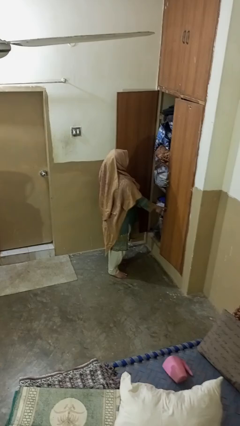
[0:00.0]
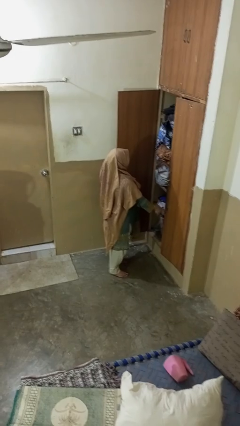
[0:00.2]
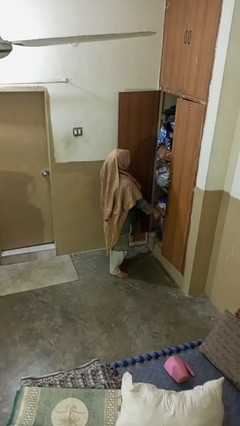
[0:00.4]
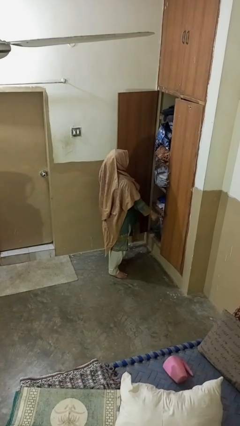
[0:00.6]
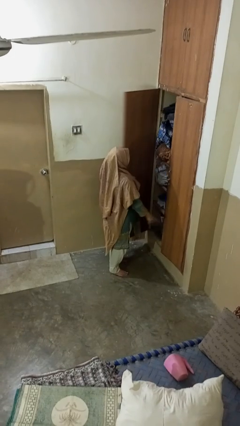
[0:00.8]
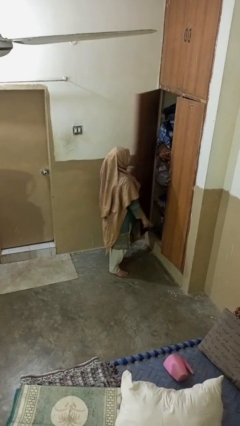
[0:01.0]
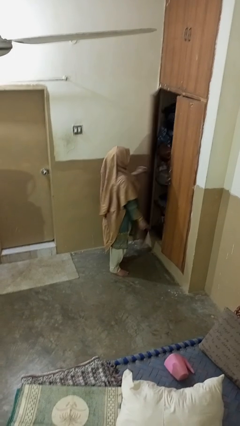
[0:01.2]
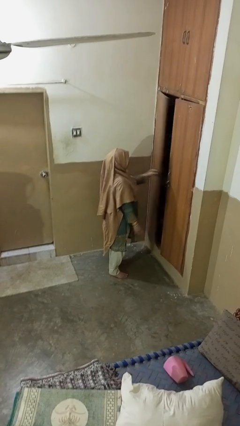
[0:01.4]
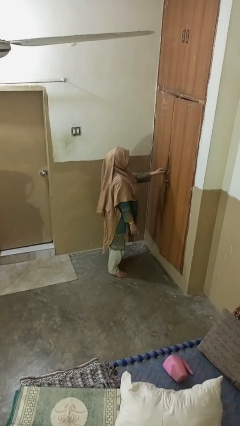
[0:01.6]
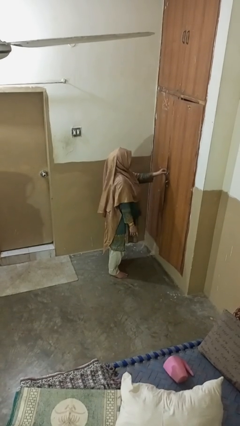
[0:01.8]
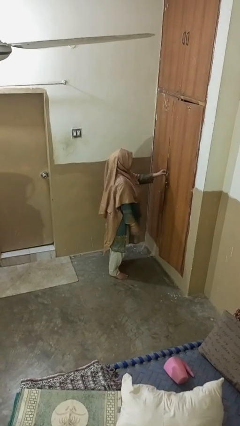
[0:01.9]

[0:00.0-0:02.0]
person closes closet door

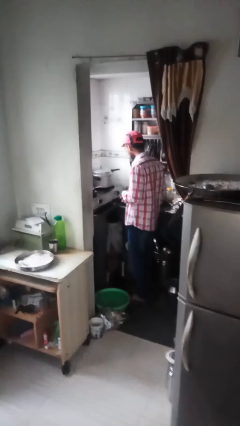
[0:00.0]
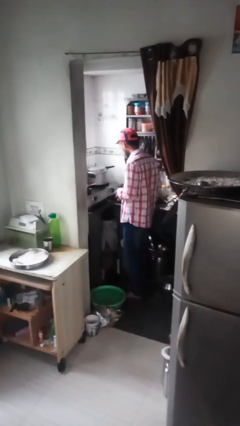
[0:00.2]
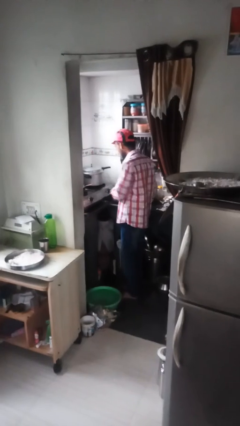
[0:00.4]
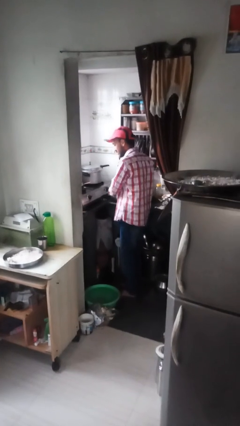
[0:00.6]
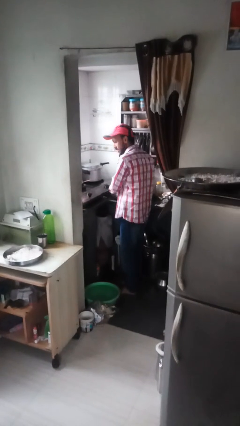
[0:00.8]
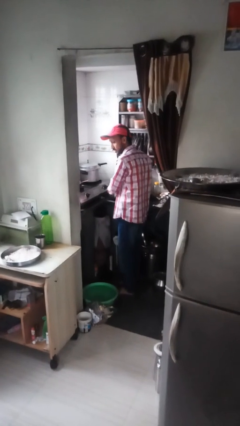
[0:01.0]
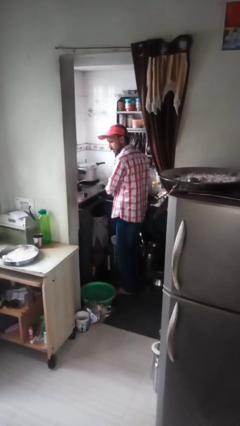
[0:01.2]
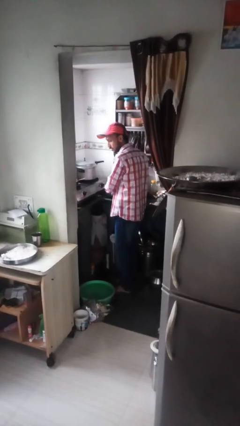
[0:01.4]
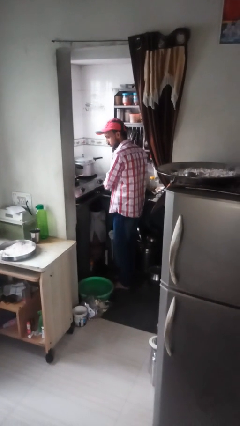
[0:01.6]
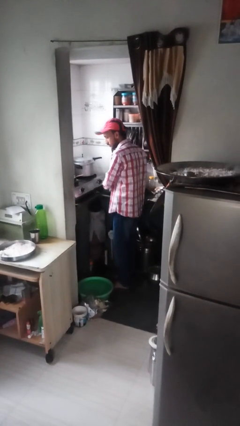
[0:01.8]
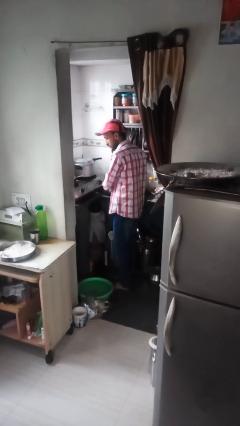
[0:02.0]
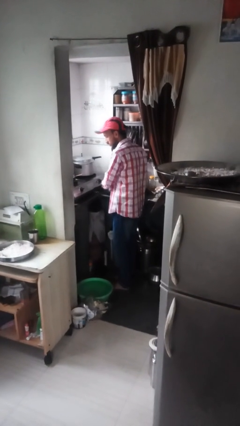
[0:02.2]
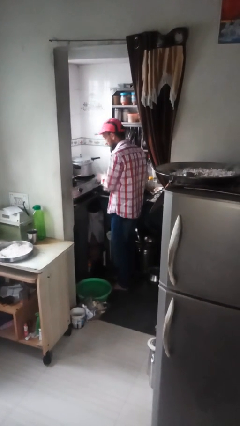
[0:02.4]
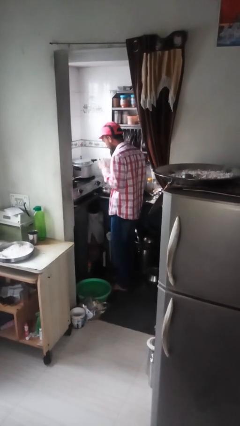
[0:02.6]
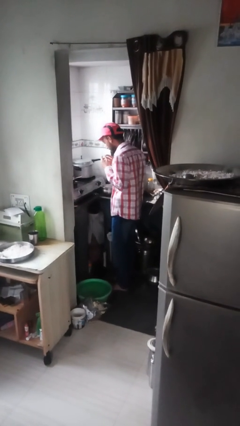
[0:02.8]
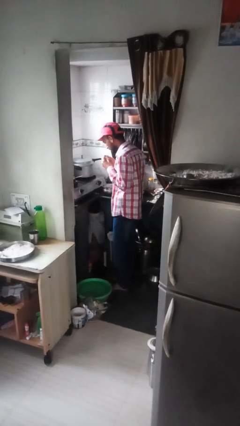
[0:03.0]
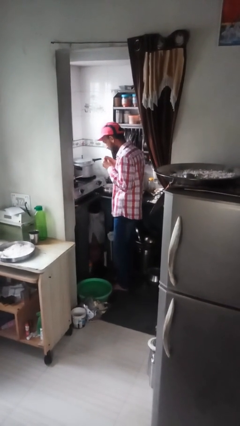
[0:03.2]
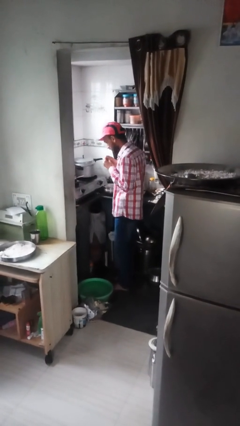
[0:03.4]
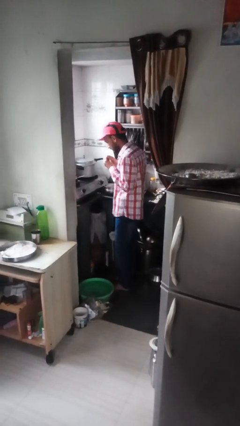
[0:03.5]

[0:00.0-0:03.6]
person burns hand

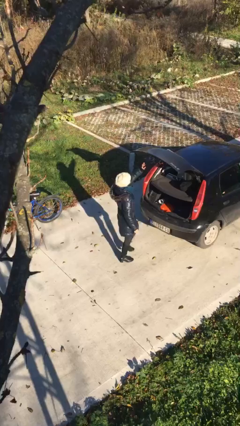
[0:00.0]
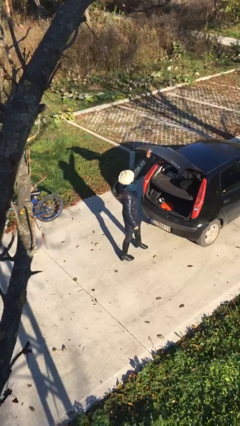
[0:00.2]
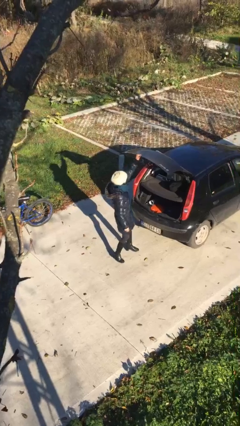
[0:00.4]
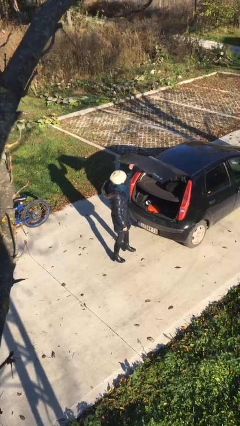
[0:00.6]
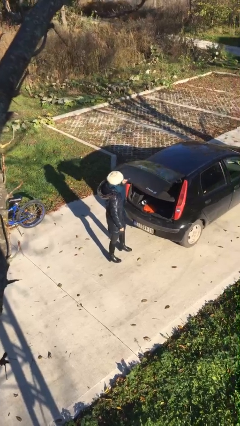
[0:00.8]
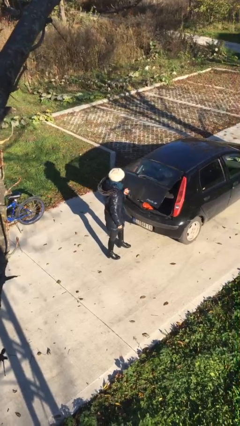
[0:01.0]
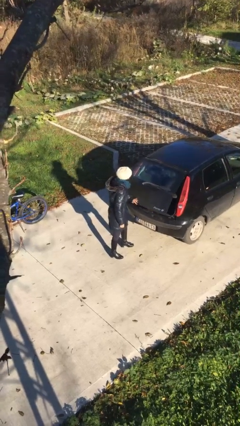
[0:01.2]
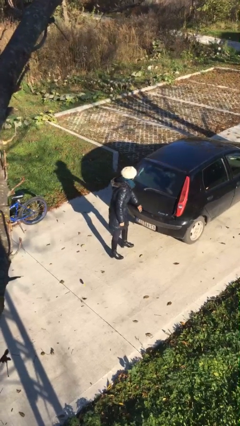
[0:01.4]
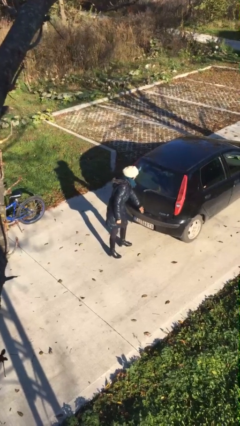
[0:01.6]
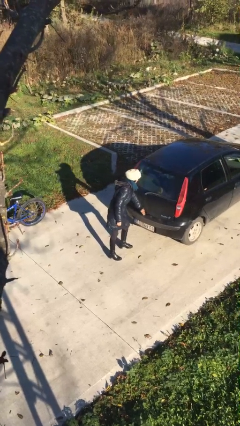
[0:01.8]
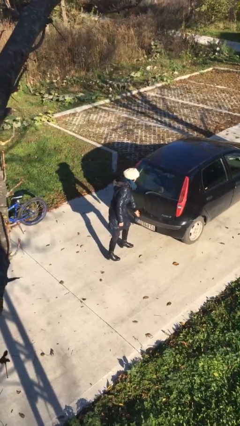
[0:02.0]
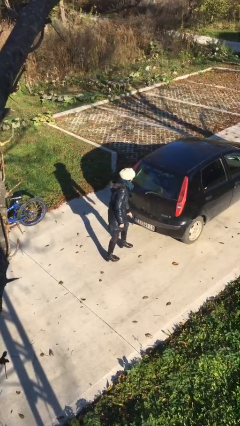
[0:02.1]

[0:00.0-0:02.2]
person closes car trunk

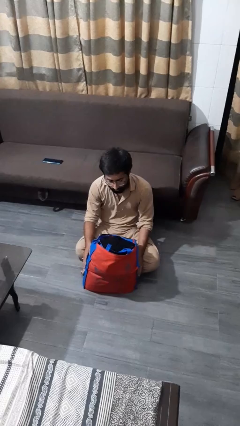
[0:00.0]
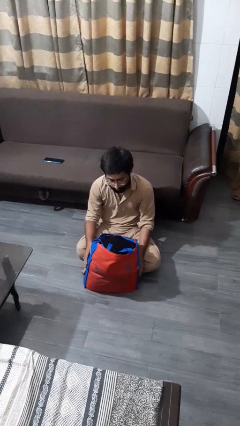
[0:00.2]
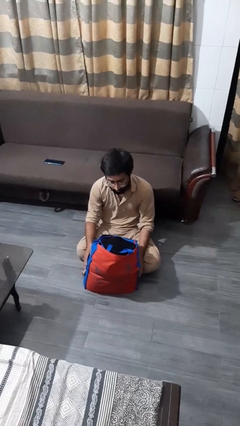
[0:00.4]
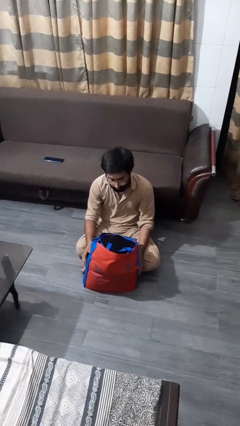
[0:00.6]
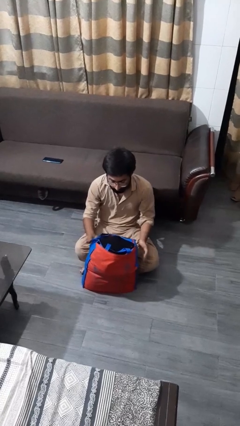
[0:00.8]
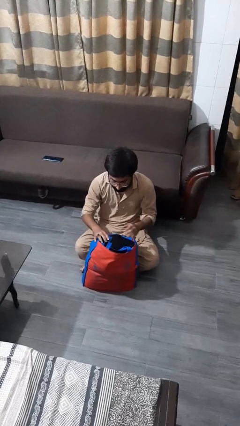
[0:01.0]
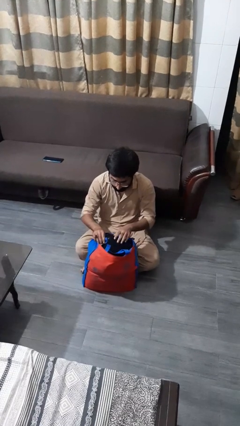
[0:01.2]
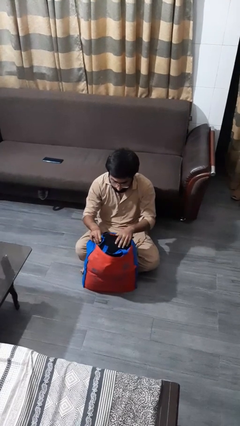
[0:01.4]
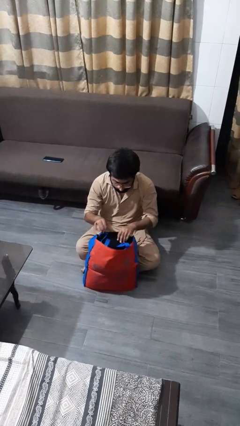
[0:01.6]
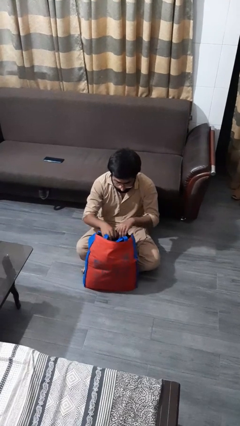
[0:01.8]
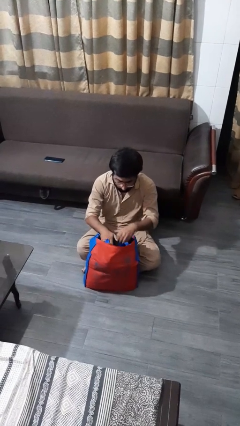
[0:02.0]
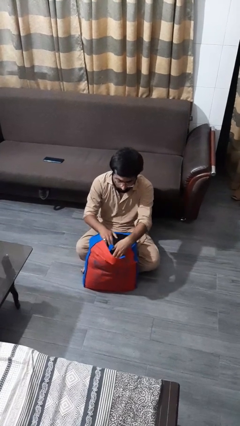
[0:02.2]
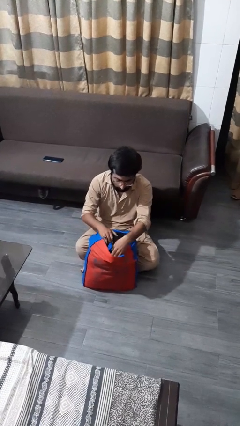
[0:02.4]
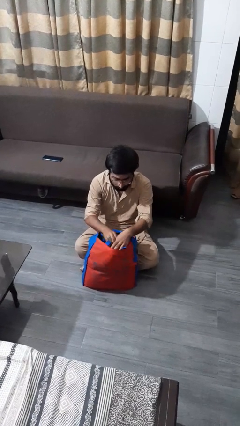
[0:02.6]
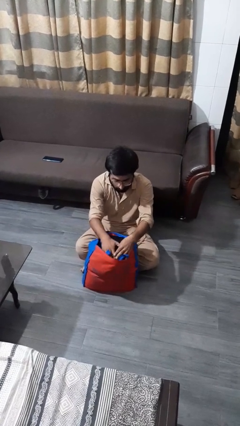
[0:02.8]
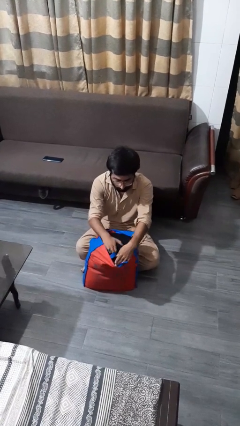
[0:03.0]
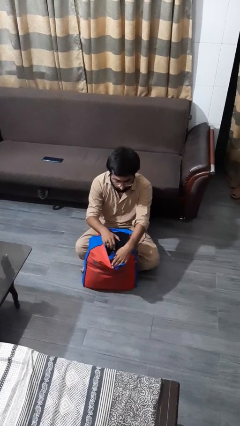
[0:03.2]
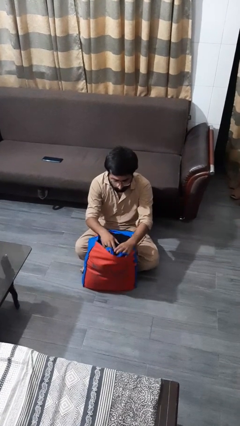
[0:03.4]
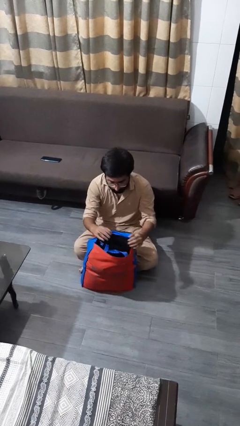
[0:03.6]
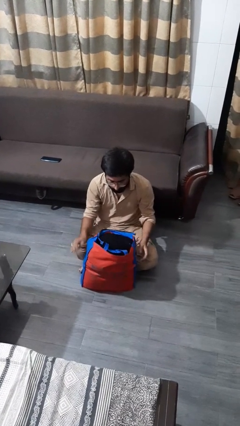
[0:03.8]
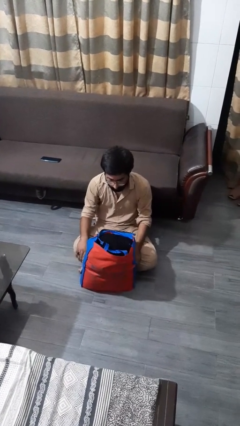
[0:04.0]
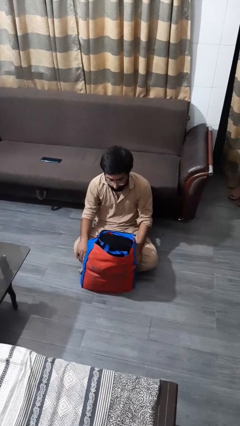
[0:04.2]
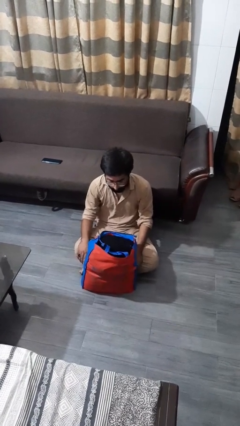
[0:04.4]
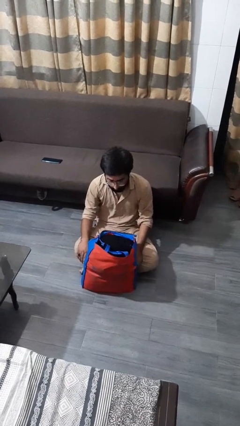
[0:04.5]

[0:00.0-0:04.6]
person searches in bag

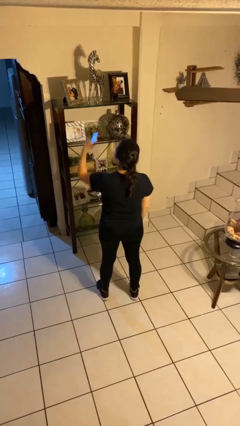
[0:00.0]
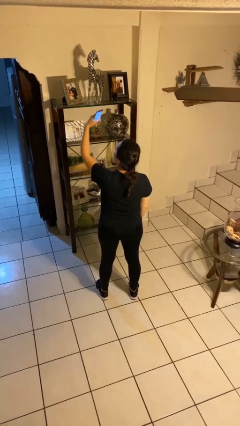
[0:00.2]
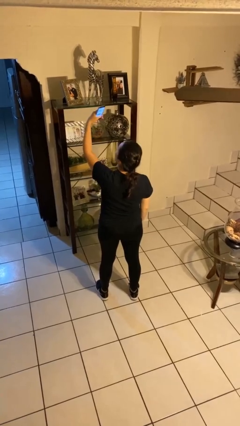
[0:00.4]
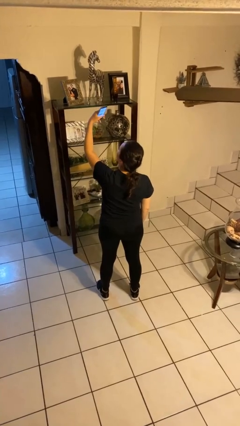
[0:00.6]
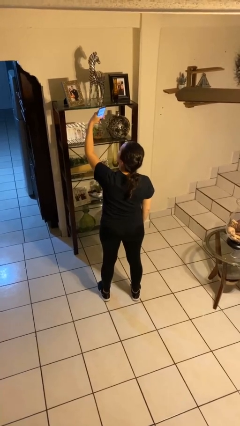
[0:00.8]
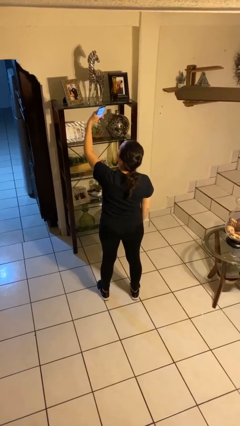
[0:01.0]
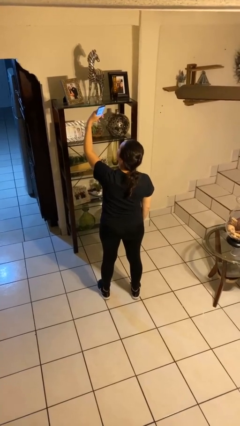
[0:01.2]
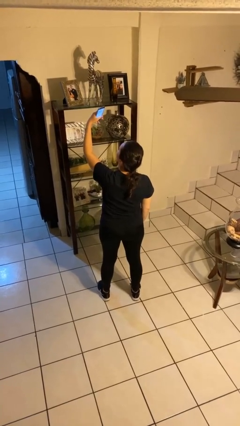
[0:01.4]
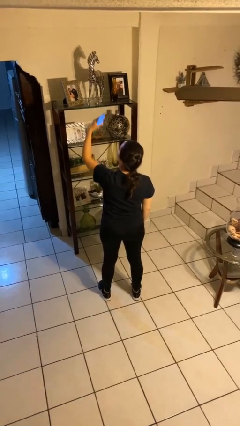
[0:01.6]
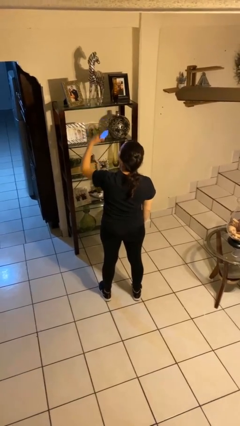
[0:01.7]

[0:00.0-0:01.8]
person takes selfie

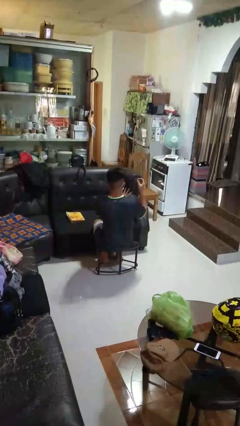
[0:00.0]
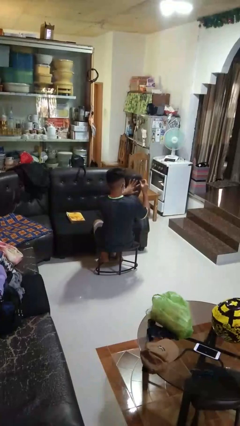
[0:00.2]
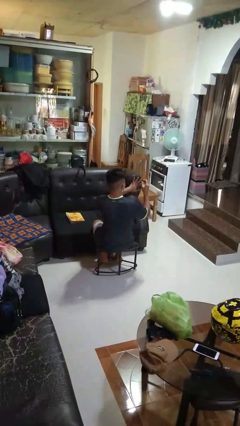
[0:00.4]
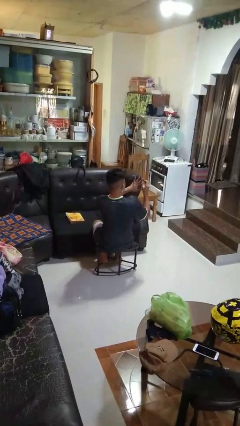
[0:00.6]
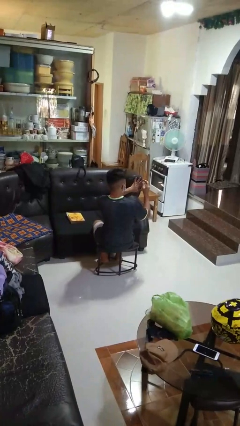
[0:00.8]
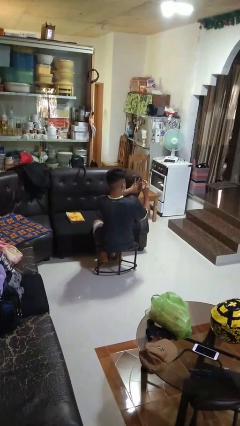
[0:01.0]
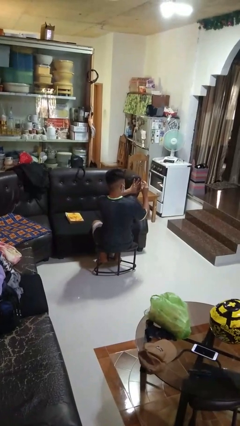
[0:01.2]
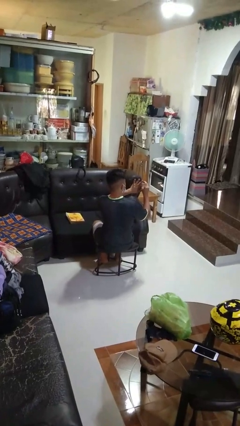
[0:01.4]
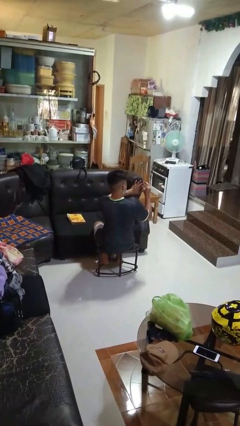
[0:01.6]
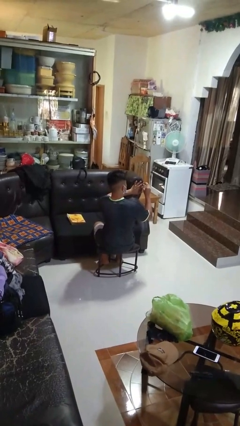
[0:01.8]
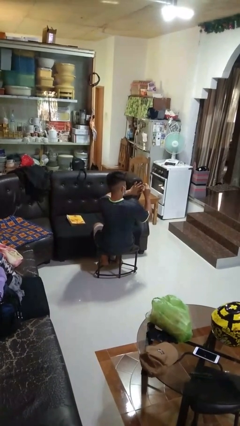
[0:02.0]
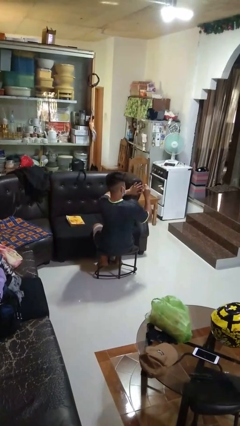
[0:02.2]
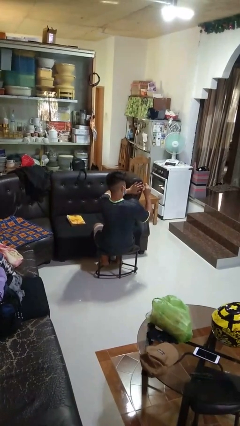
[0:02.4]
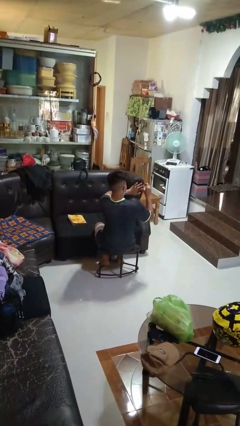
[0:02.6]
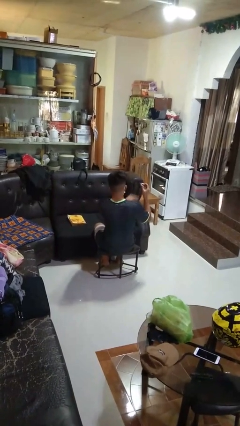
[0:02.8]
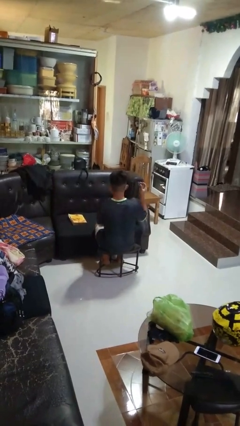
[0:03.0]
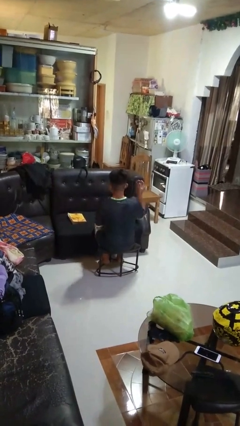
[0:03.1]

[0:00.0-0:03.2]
person clips fingernails
